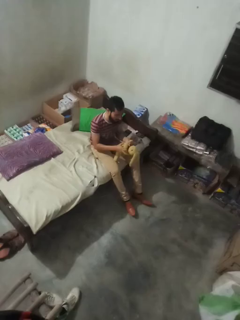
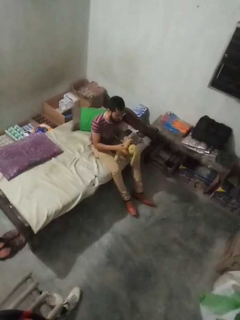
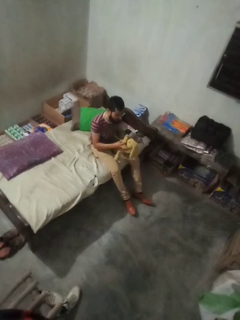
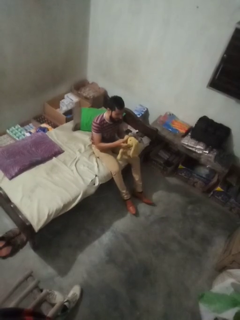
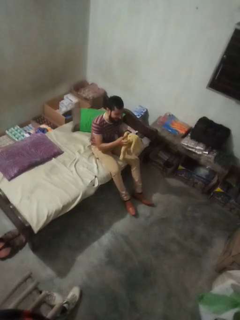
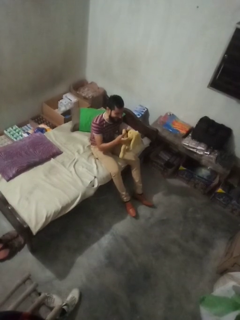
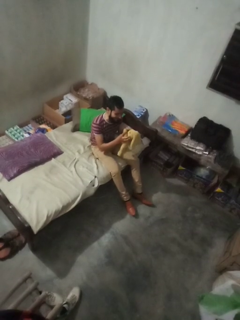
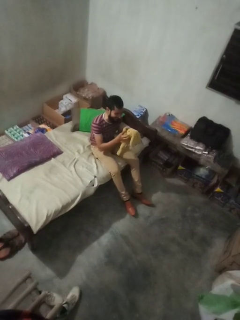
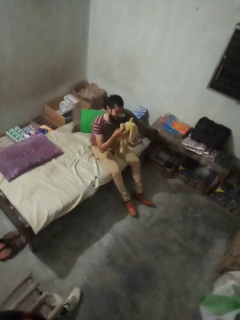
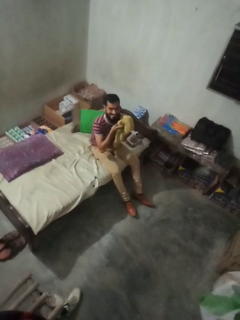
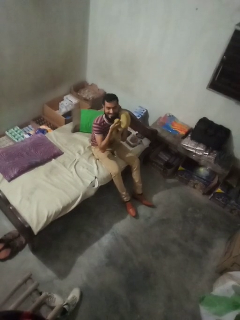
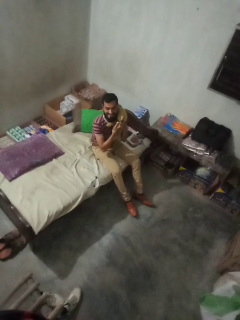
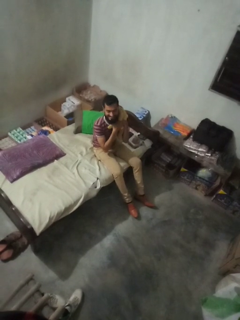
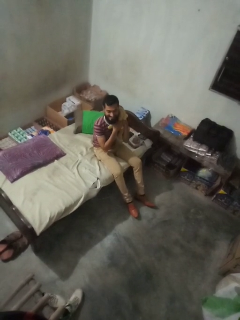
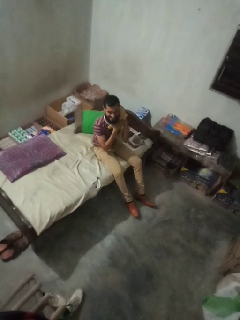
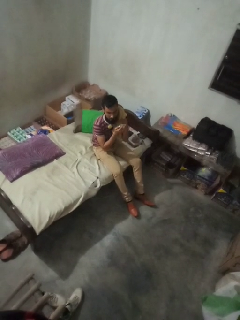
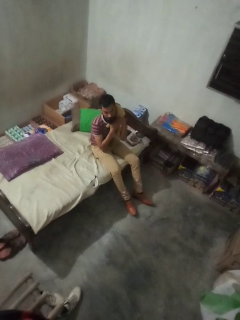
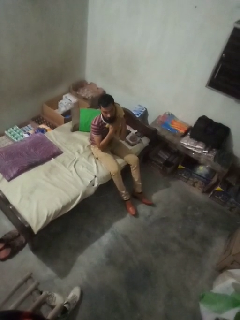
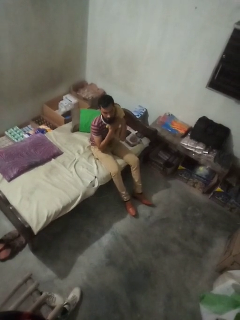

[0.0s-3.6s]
person hugs stuffed animal

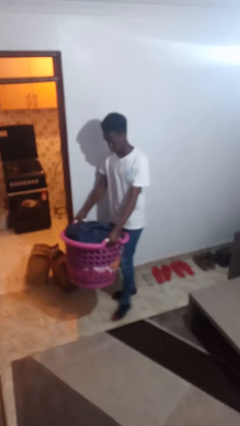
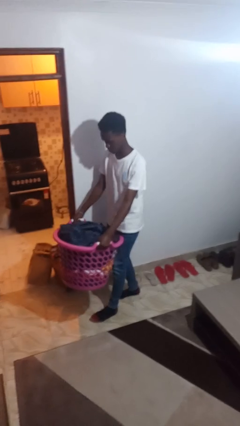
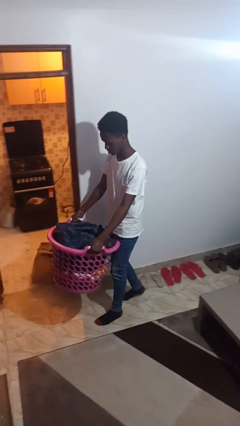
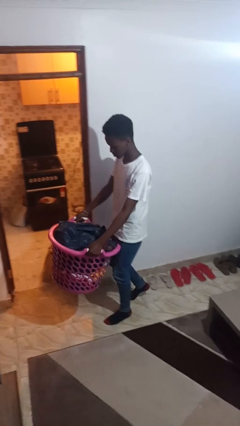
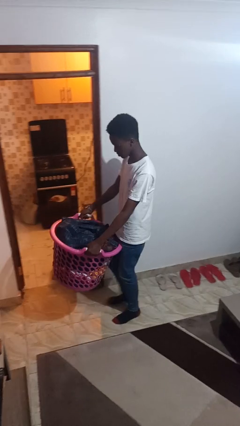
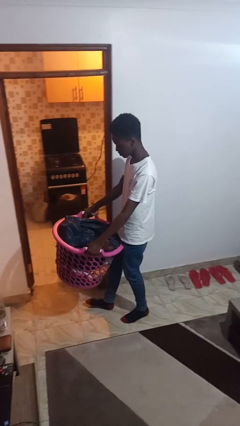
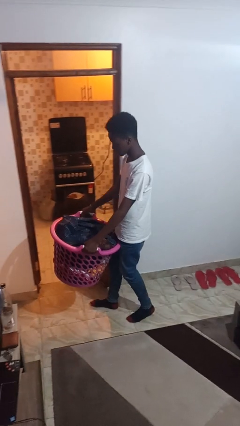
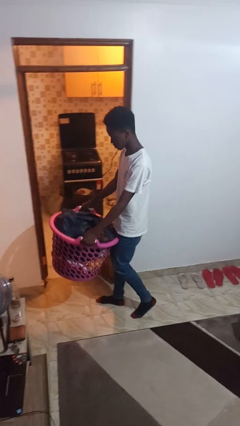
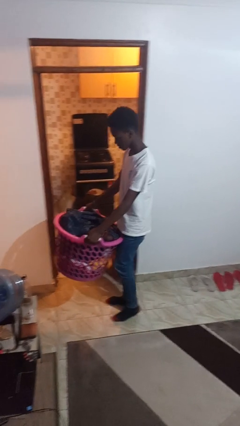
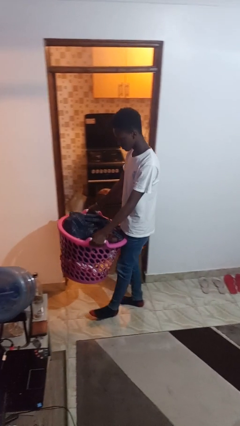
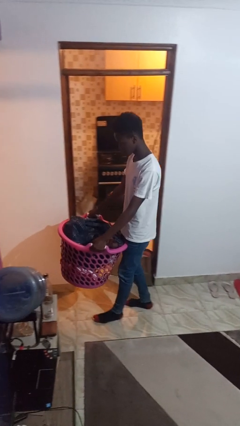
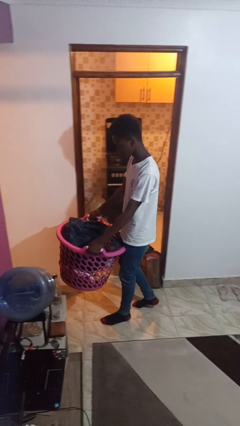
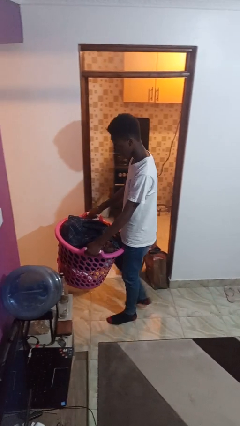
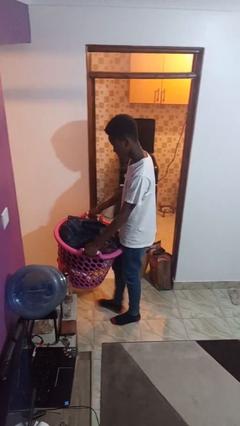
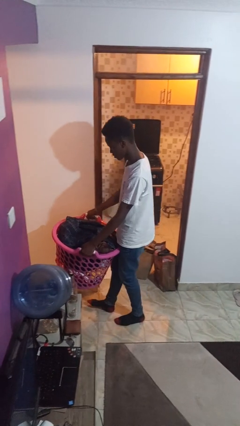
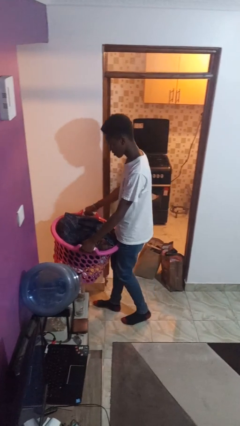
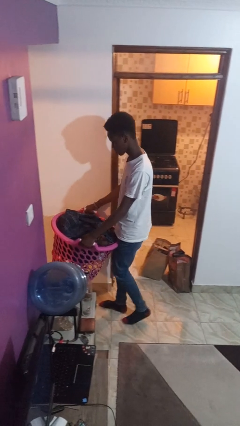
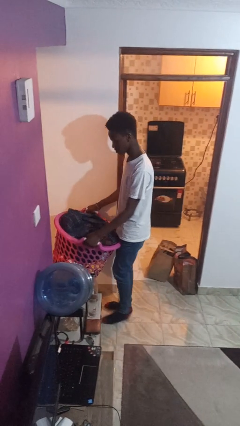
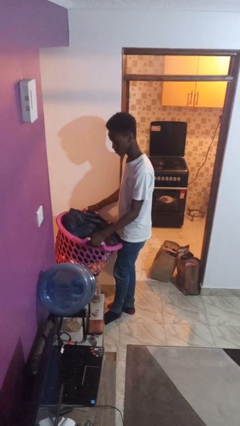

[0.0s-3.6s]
person carries laundry basket

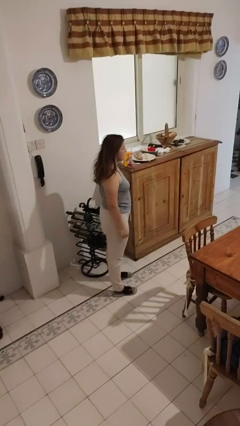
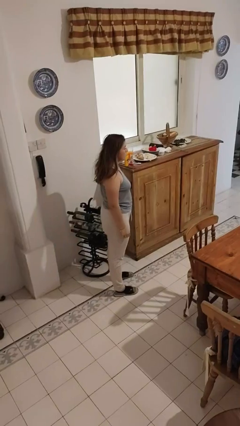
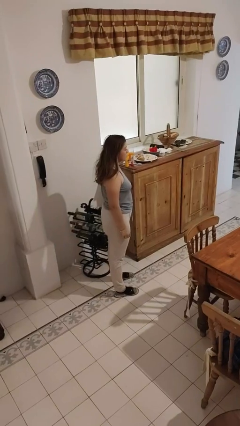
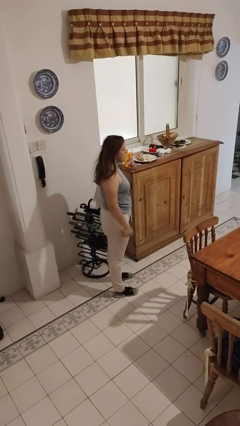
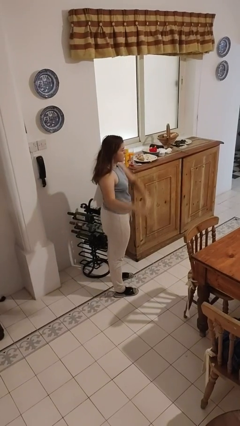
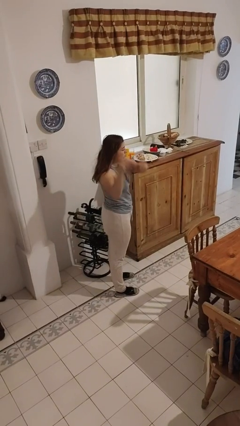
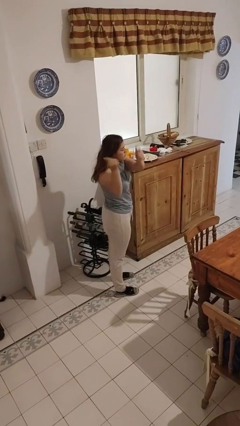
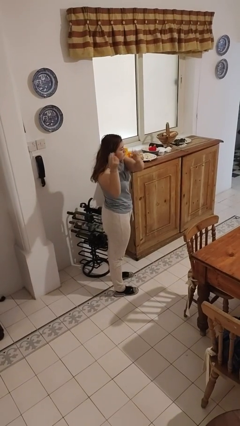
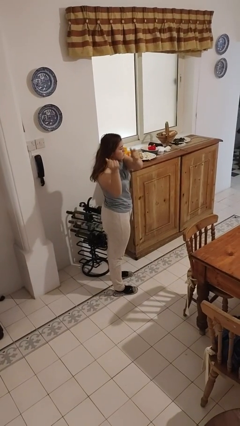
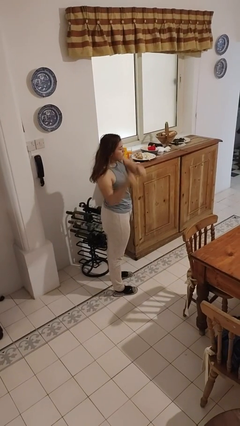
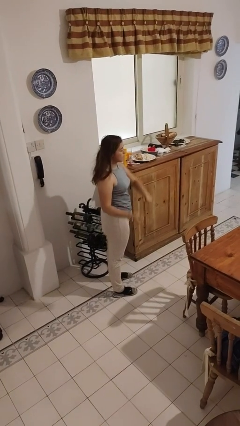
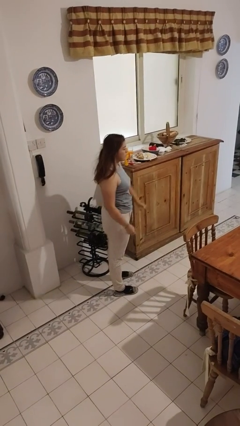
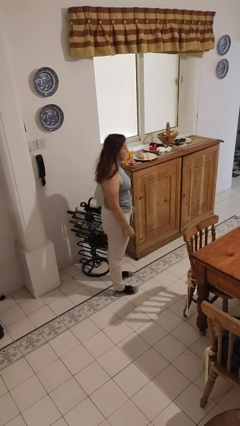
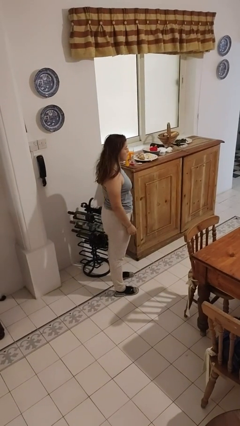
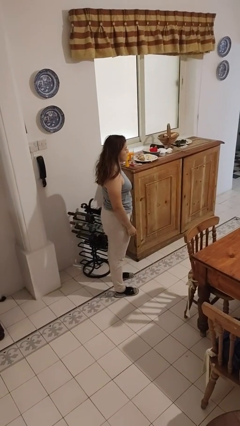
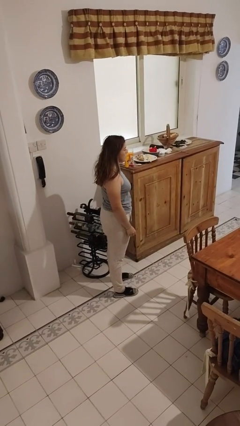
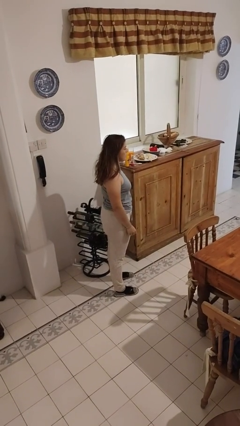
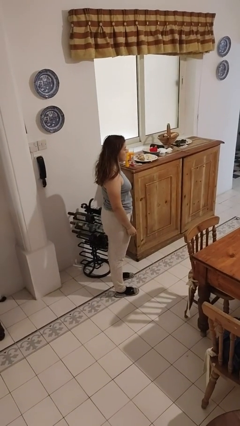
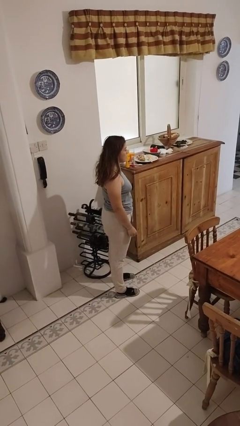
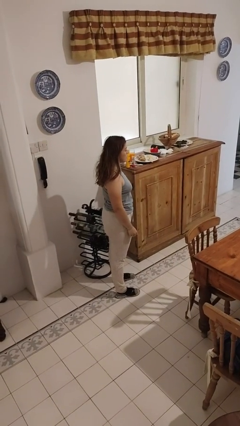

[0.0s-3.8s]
person snaps fingers

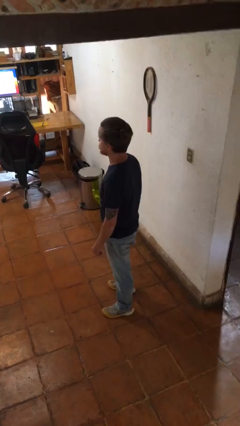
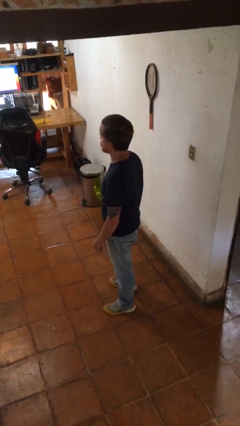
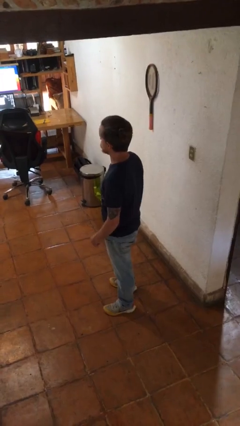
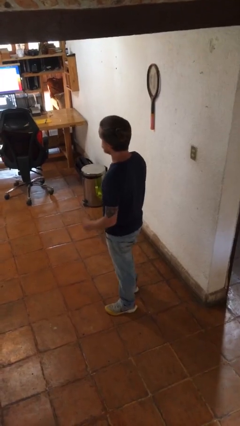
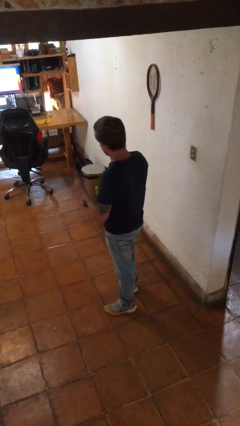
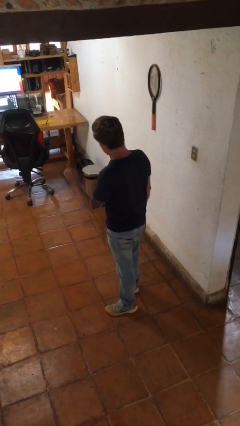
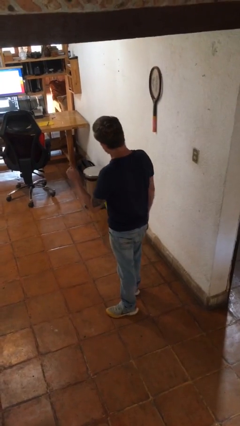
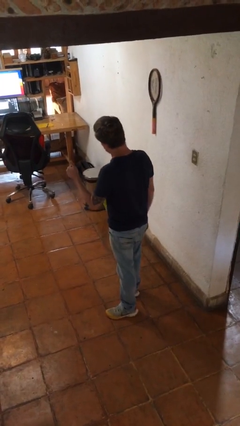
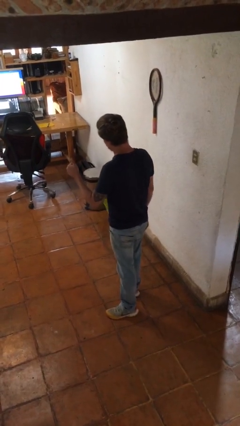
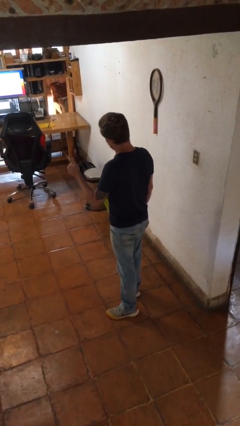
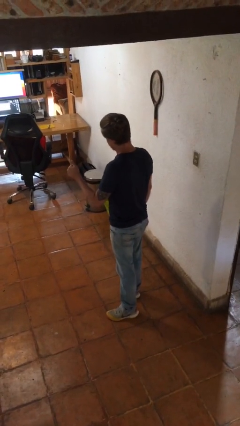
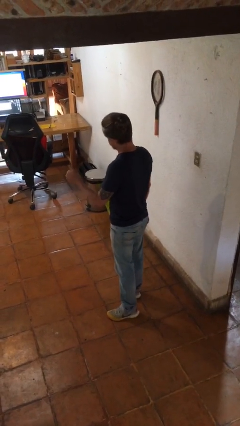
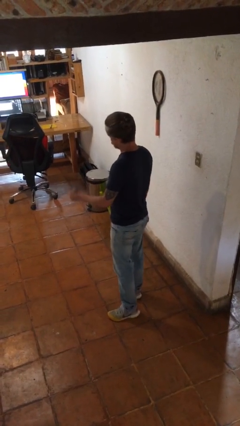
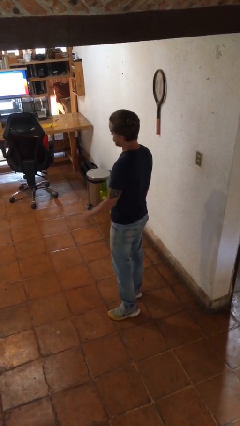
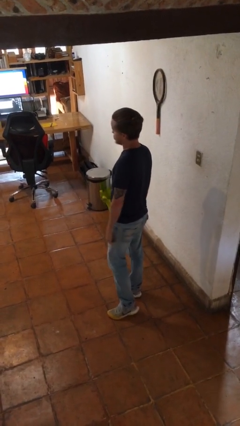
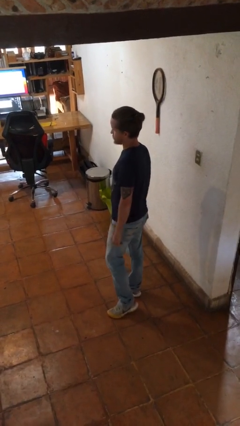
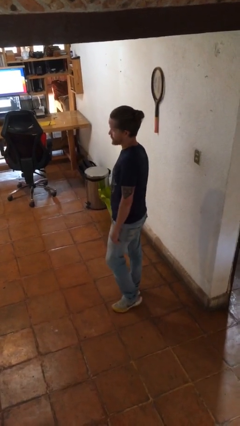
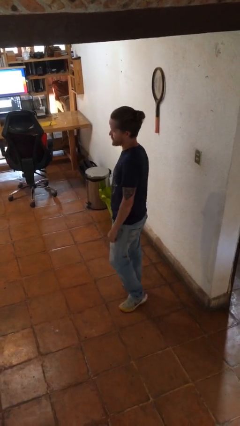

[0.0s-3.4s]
person gestures thumbs up

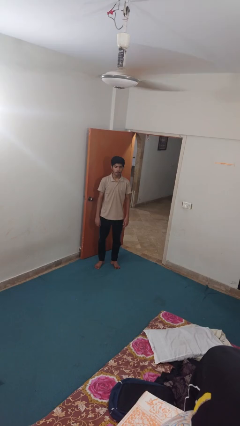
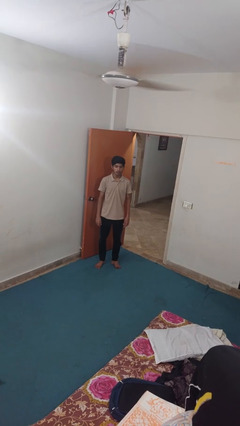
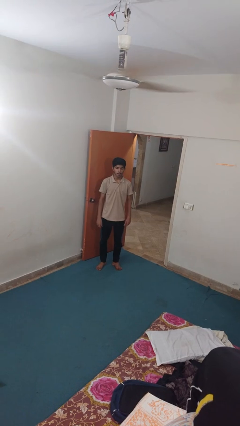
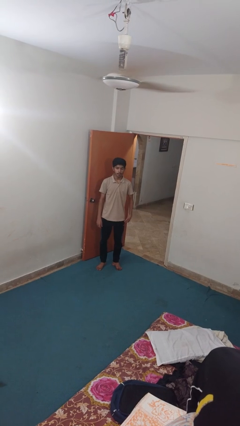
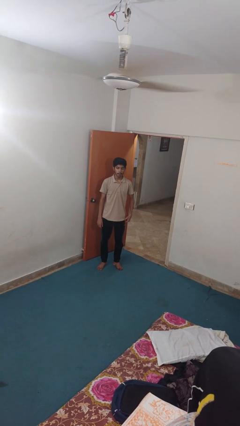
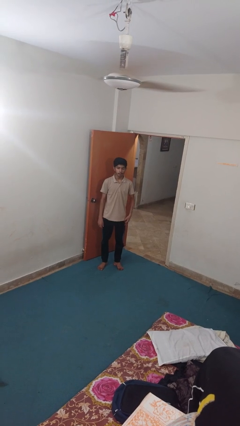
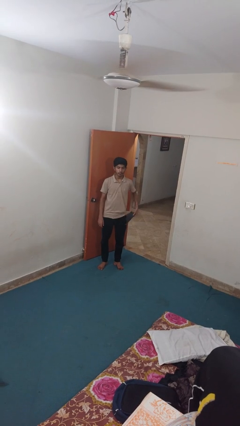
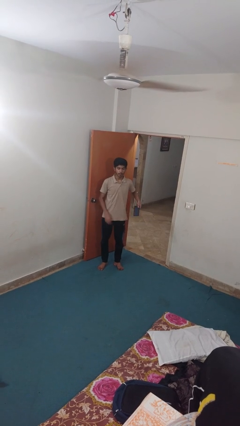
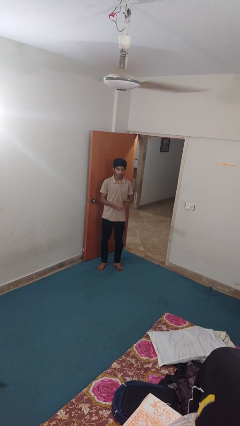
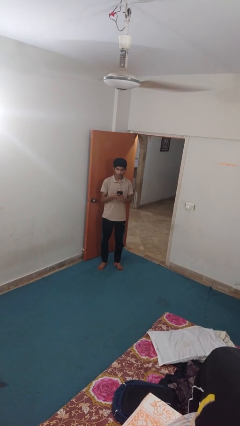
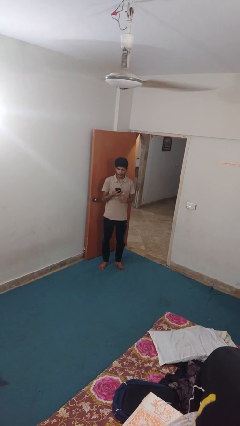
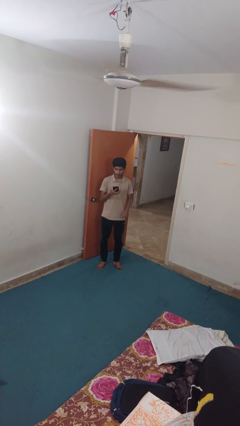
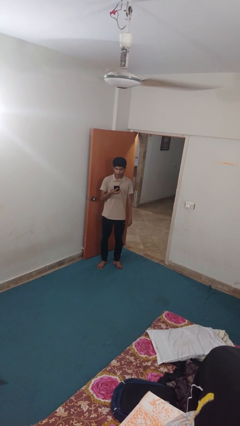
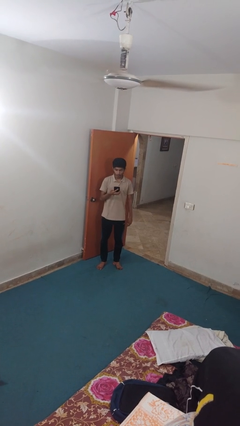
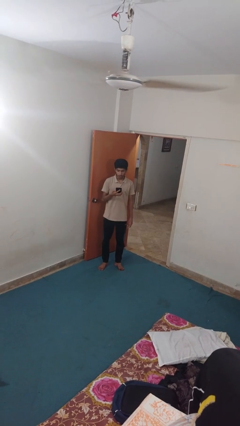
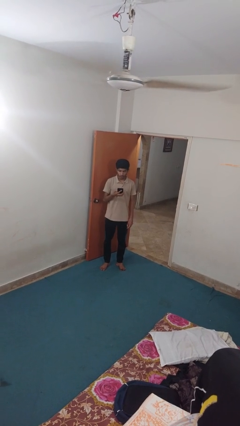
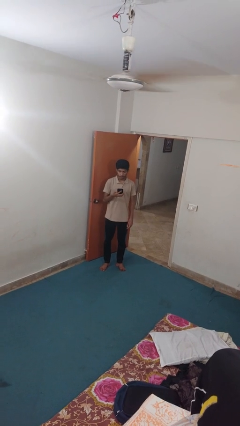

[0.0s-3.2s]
person takes phone from pocket

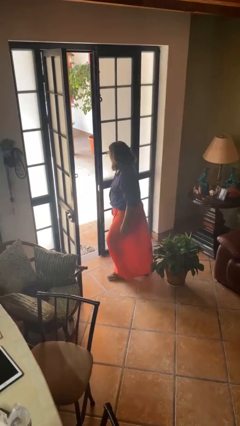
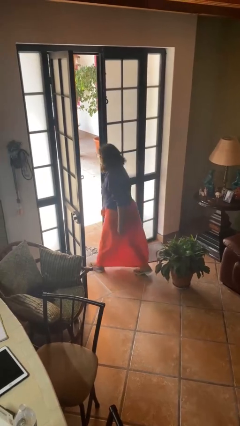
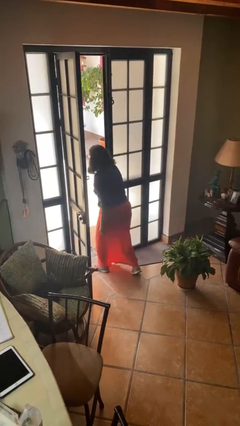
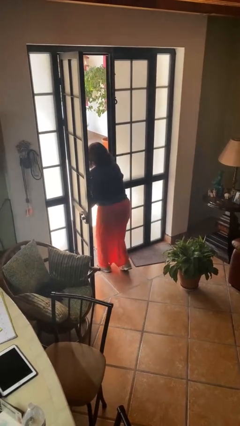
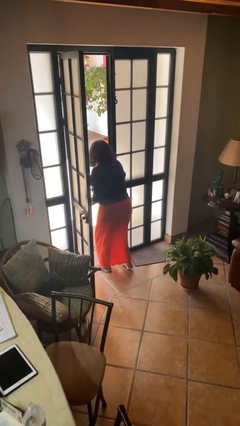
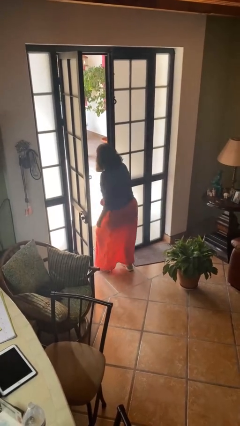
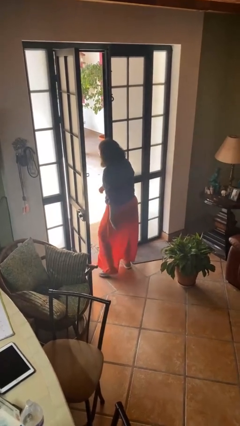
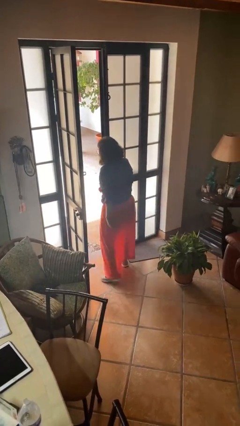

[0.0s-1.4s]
person bumps into wall
